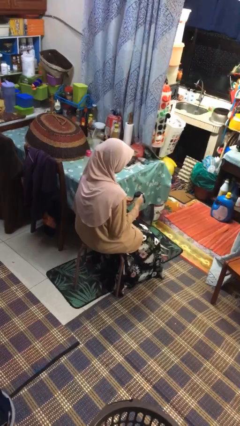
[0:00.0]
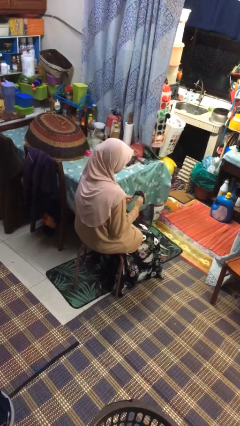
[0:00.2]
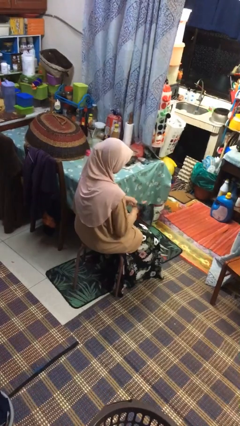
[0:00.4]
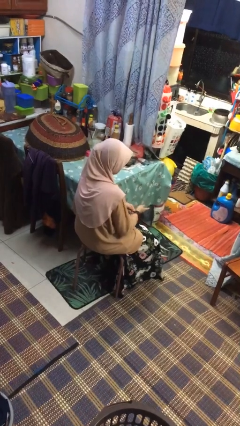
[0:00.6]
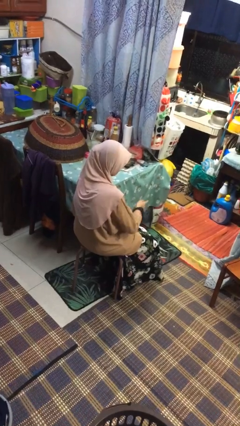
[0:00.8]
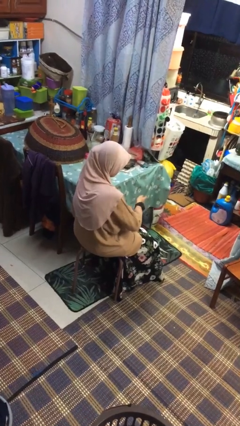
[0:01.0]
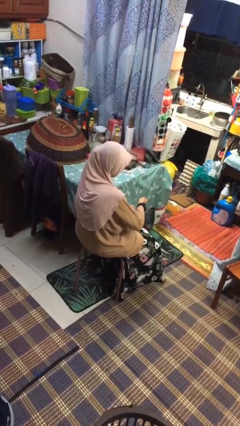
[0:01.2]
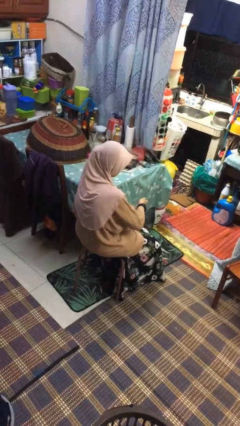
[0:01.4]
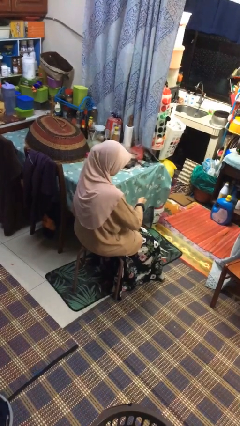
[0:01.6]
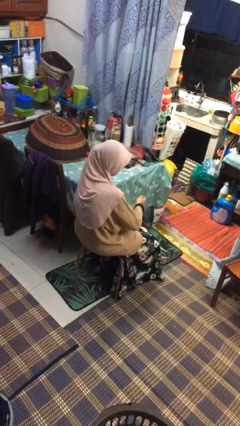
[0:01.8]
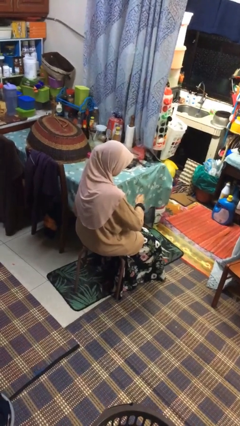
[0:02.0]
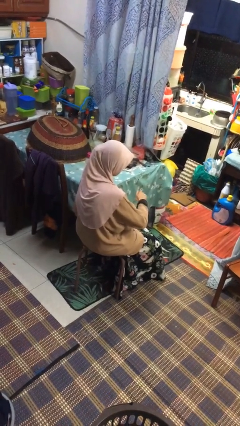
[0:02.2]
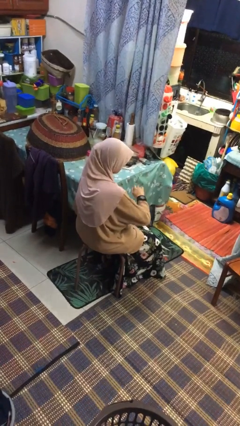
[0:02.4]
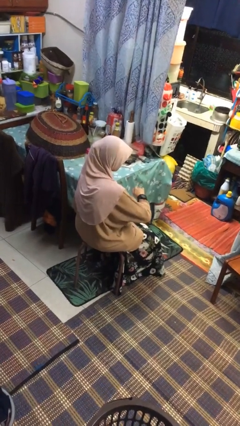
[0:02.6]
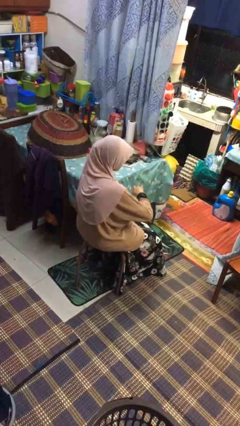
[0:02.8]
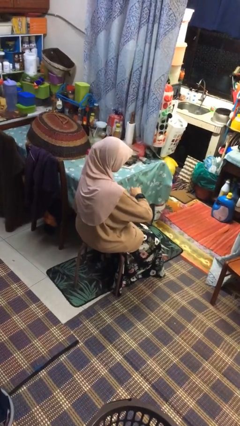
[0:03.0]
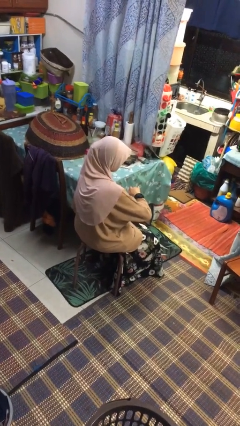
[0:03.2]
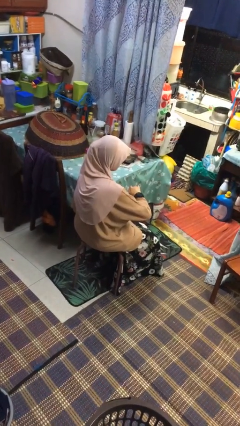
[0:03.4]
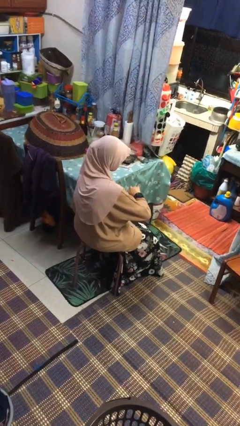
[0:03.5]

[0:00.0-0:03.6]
person puts on wristwatch

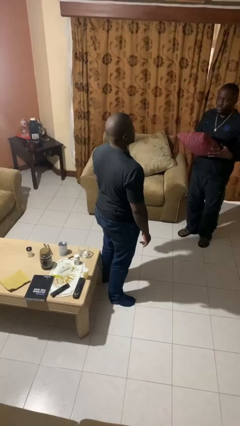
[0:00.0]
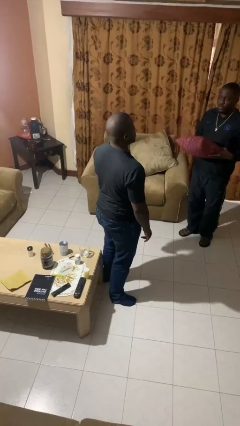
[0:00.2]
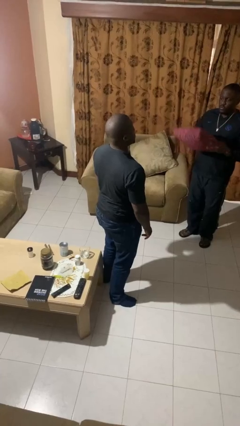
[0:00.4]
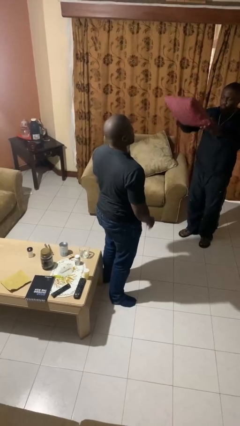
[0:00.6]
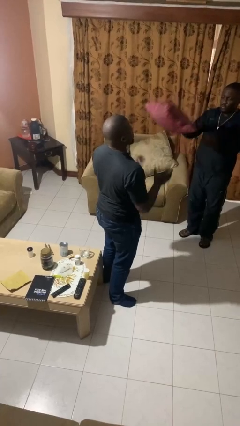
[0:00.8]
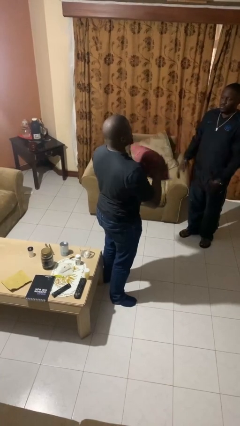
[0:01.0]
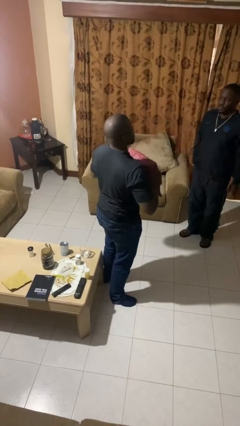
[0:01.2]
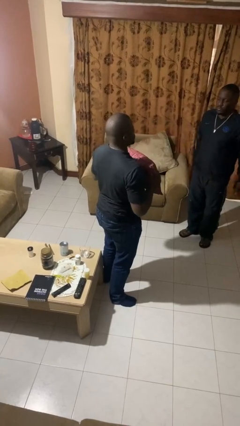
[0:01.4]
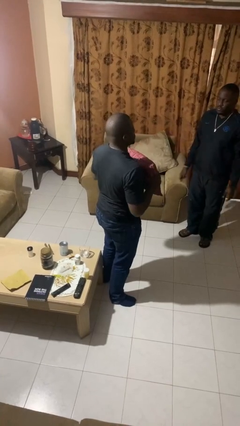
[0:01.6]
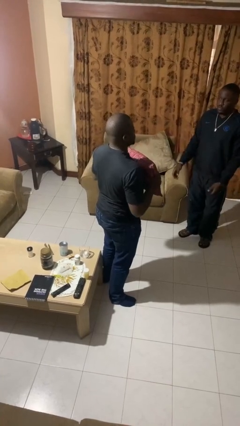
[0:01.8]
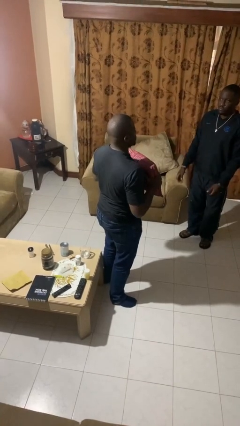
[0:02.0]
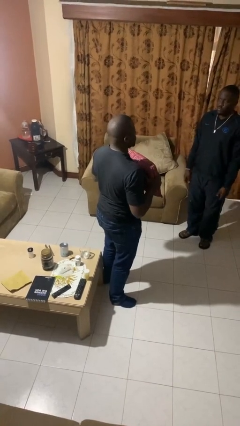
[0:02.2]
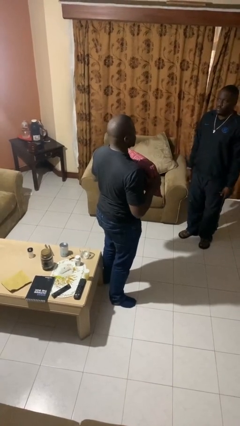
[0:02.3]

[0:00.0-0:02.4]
person catches object from person

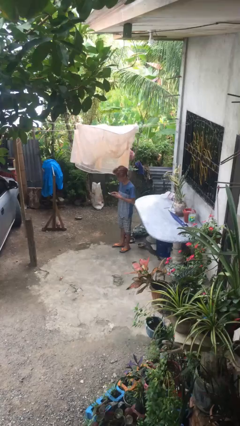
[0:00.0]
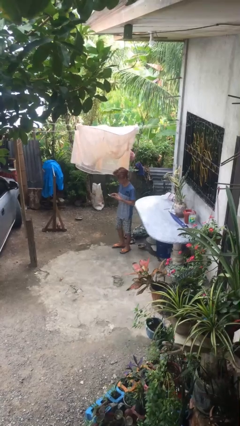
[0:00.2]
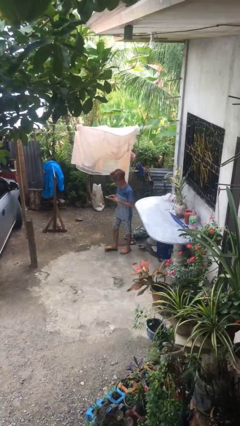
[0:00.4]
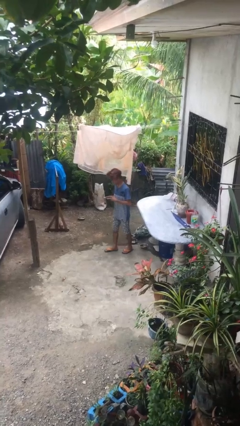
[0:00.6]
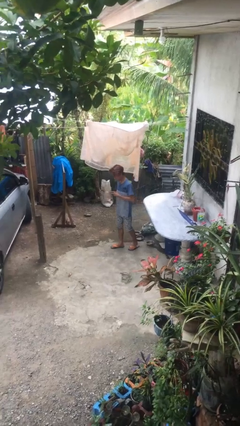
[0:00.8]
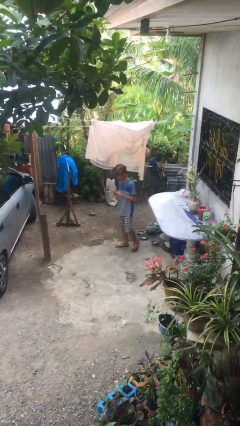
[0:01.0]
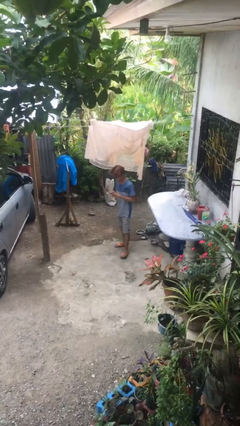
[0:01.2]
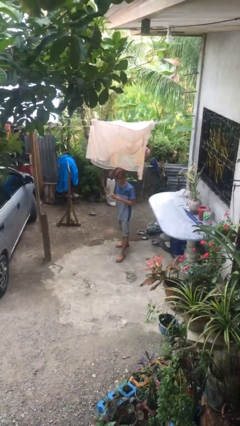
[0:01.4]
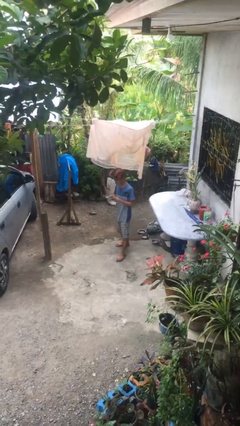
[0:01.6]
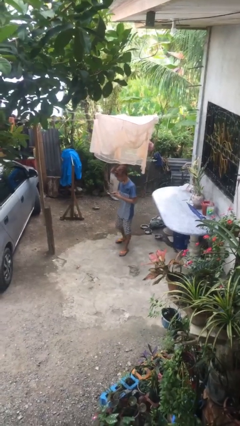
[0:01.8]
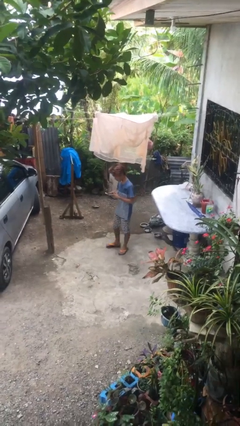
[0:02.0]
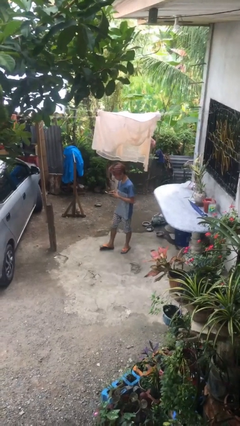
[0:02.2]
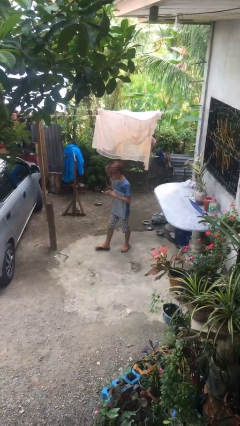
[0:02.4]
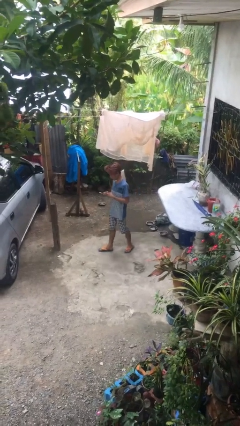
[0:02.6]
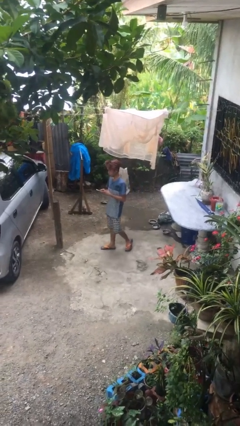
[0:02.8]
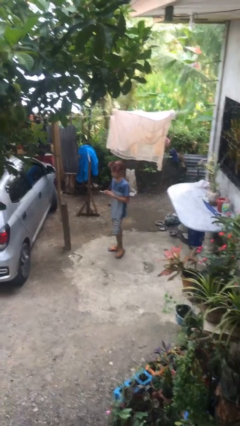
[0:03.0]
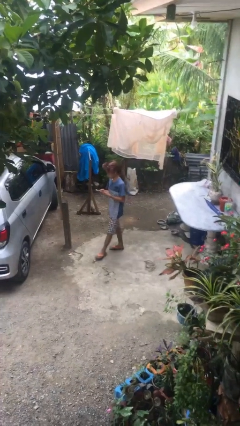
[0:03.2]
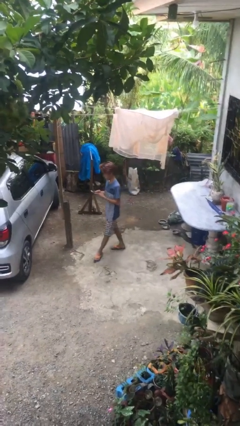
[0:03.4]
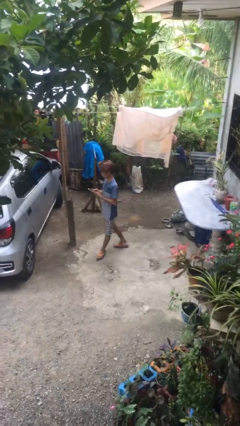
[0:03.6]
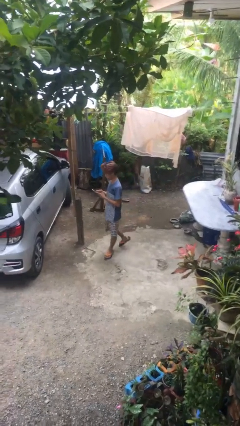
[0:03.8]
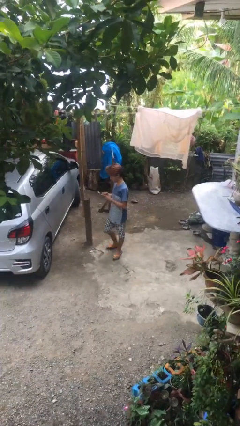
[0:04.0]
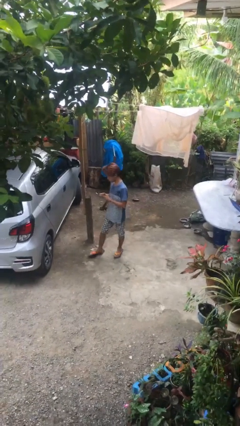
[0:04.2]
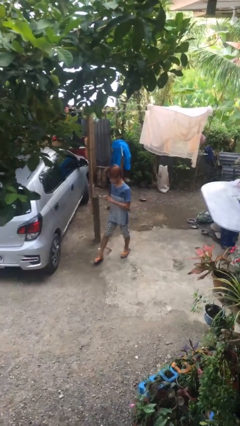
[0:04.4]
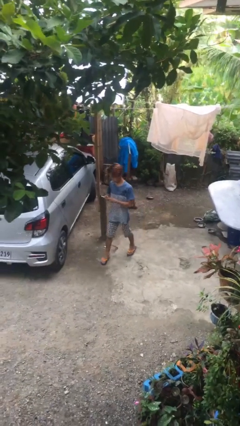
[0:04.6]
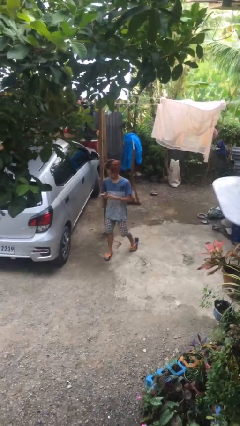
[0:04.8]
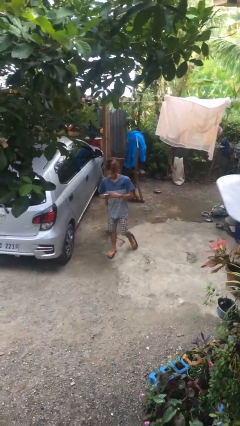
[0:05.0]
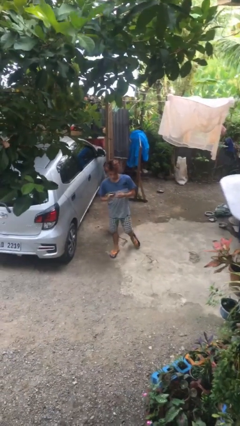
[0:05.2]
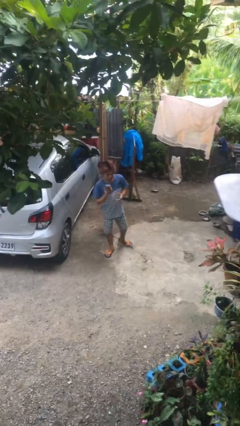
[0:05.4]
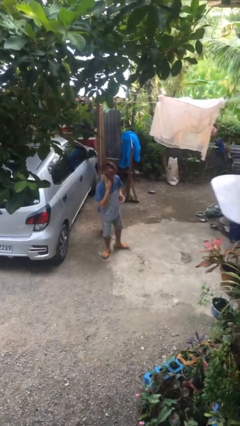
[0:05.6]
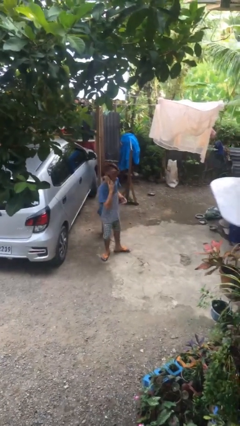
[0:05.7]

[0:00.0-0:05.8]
person texts on phone

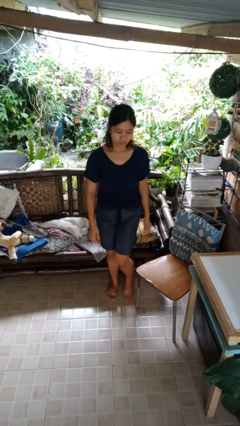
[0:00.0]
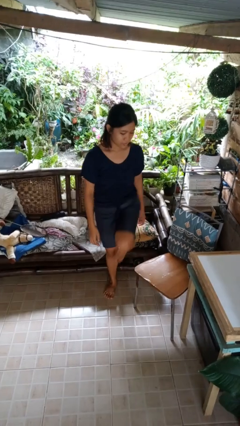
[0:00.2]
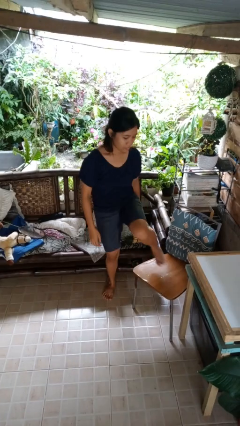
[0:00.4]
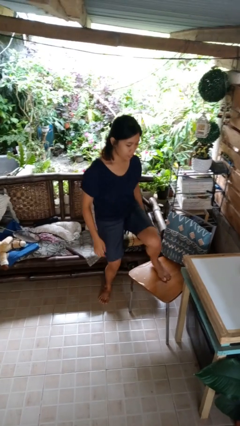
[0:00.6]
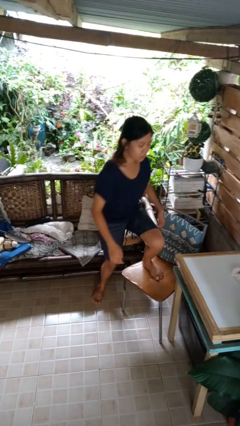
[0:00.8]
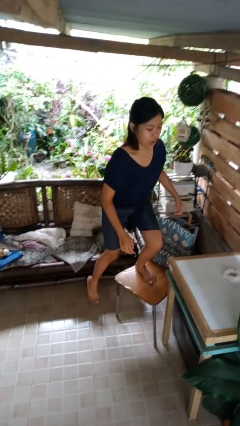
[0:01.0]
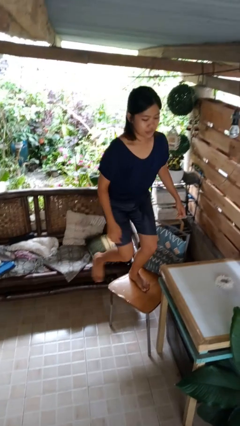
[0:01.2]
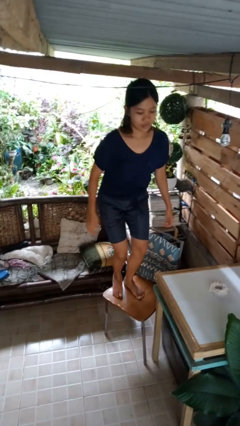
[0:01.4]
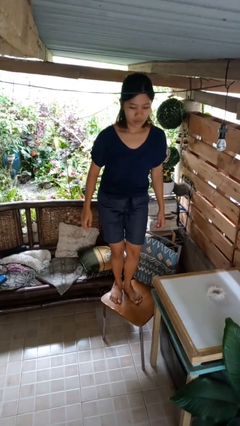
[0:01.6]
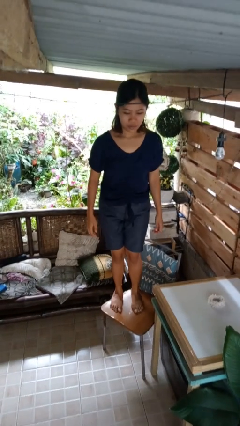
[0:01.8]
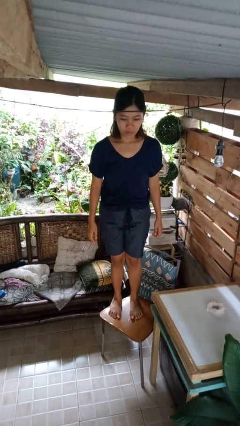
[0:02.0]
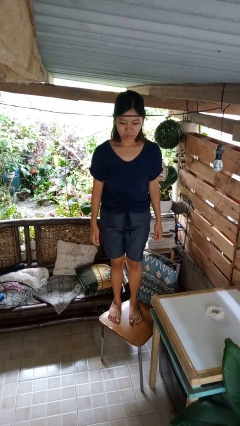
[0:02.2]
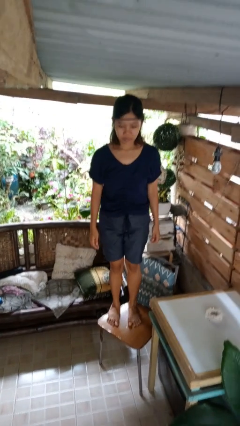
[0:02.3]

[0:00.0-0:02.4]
person climbs on chair

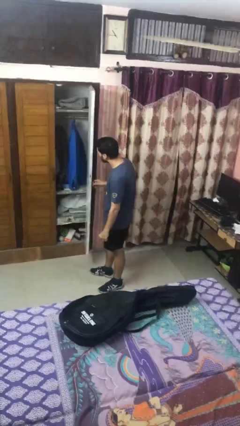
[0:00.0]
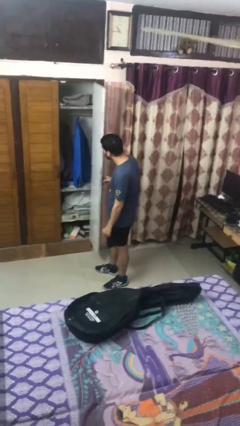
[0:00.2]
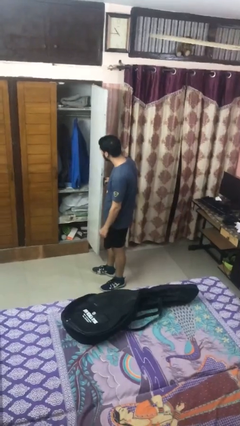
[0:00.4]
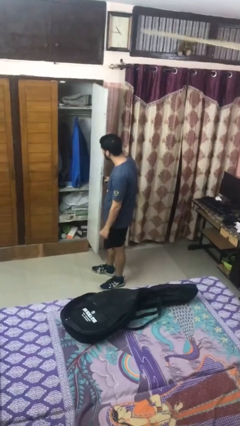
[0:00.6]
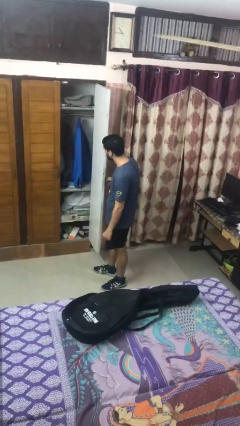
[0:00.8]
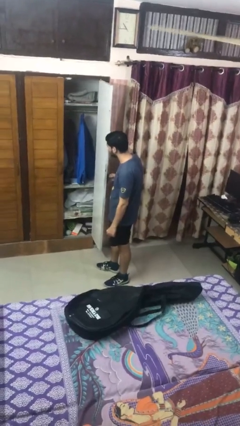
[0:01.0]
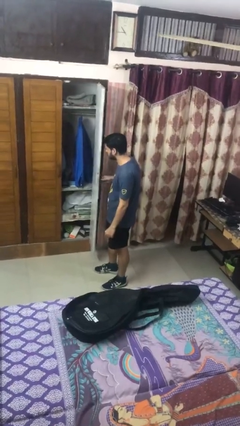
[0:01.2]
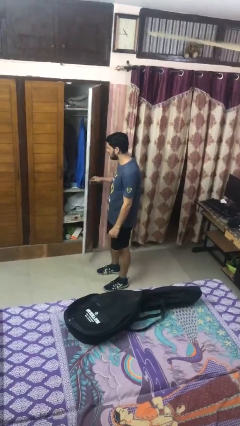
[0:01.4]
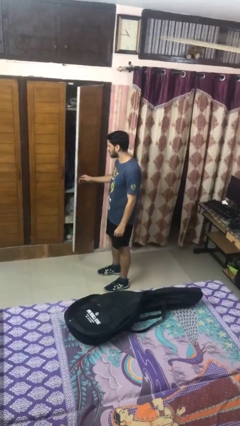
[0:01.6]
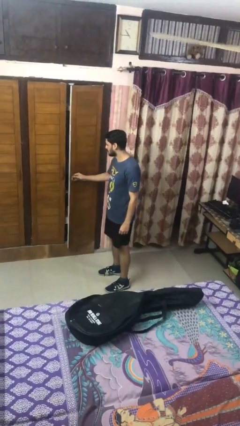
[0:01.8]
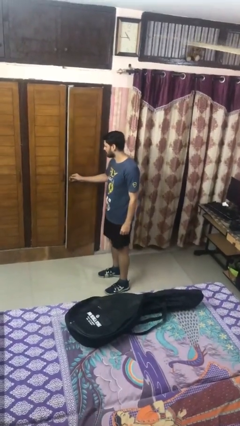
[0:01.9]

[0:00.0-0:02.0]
person closes closet door

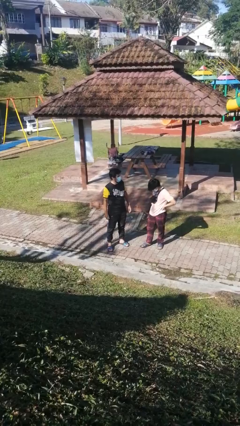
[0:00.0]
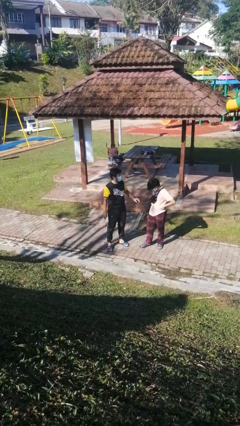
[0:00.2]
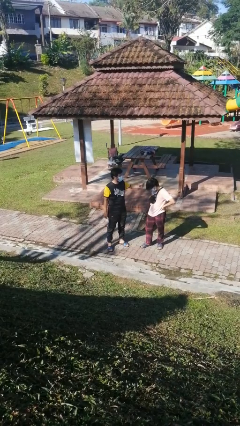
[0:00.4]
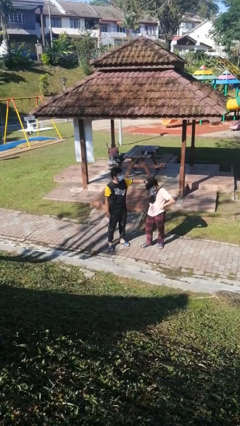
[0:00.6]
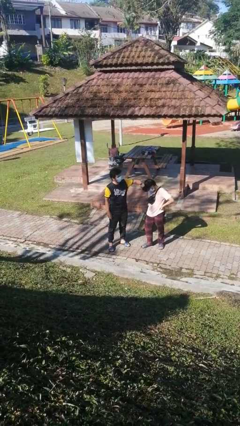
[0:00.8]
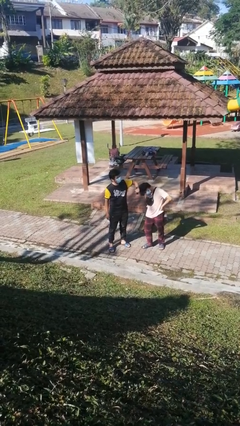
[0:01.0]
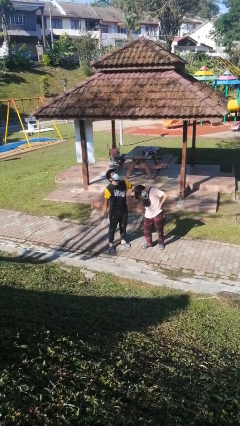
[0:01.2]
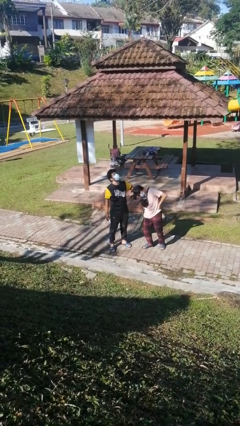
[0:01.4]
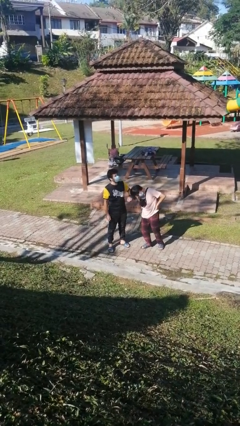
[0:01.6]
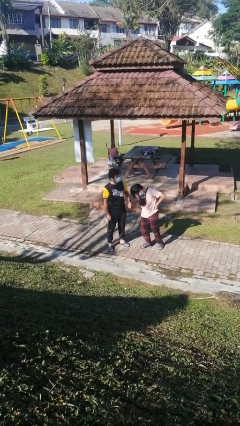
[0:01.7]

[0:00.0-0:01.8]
person grabs person by hair
